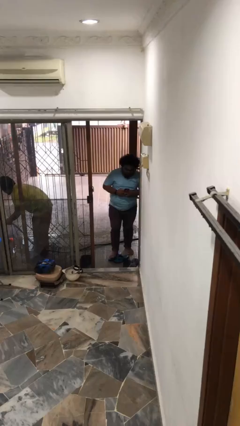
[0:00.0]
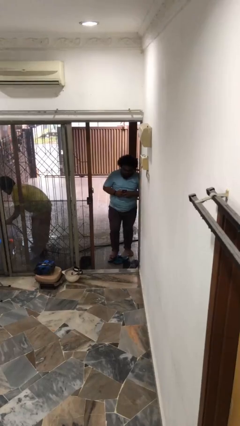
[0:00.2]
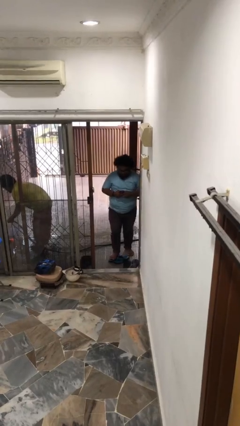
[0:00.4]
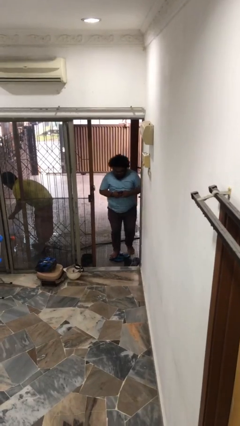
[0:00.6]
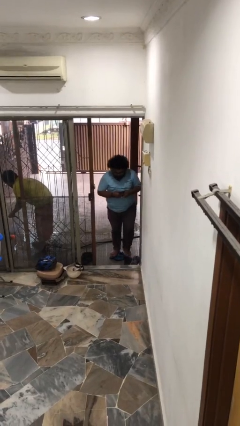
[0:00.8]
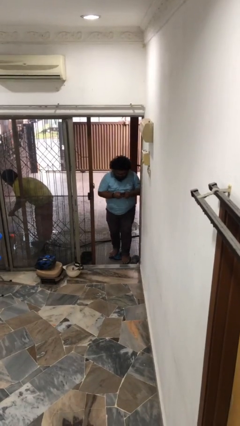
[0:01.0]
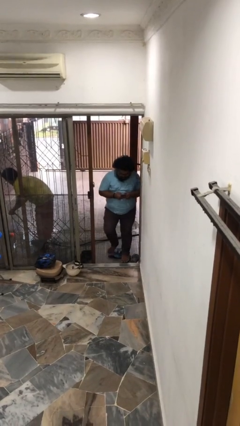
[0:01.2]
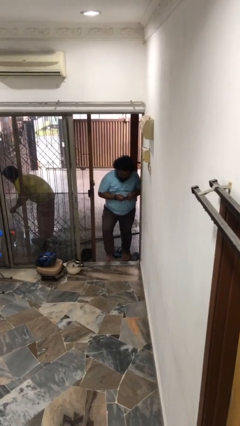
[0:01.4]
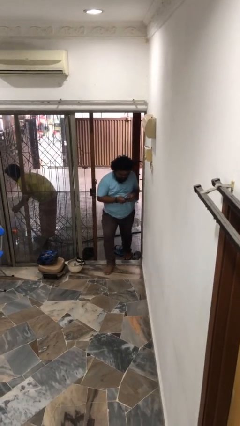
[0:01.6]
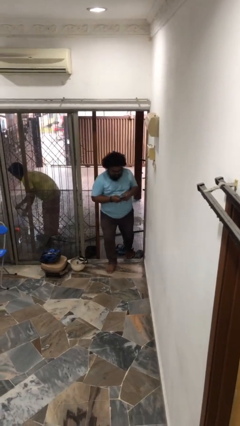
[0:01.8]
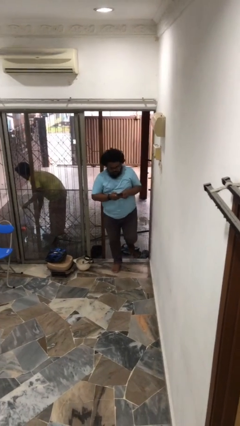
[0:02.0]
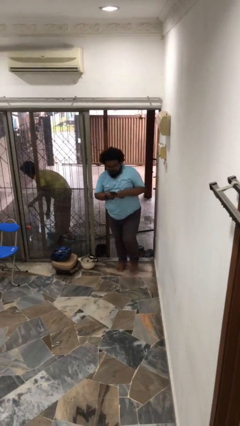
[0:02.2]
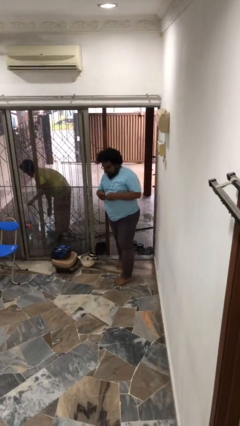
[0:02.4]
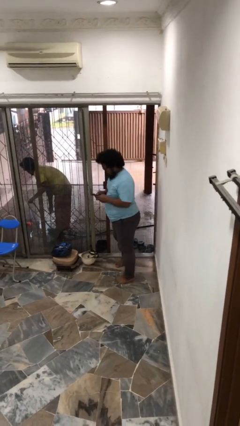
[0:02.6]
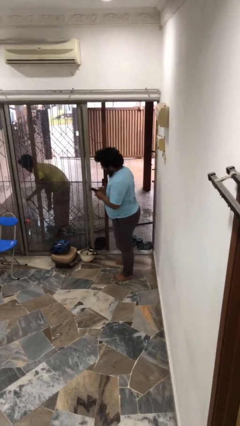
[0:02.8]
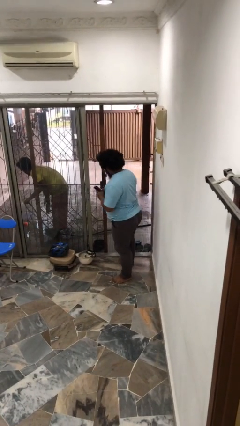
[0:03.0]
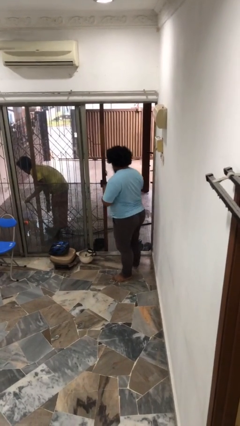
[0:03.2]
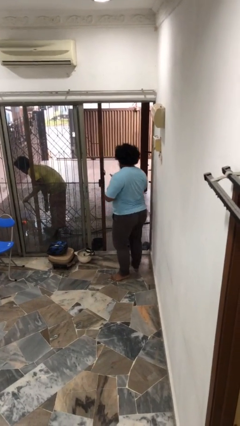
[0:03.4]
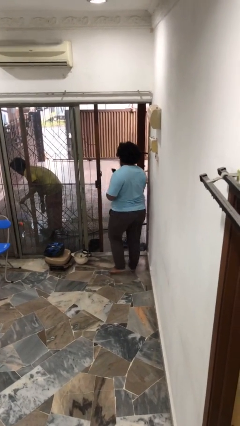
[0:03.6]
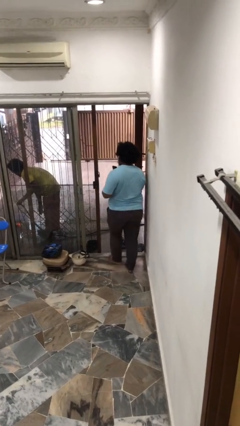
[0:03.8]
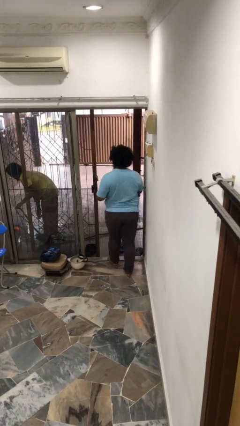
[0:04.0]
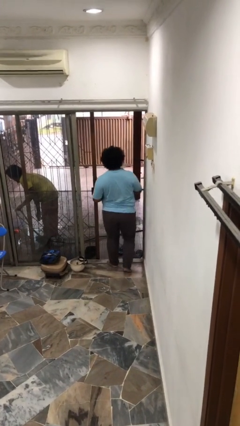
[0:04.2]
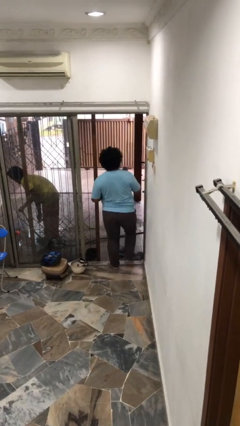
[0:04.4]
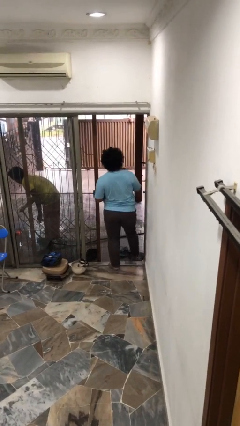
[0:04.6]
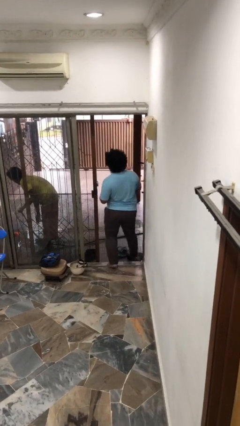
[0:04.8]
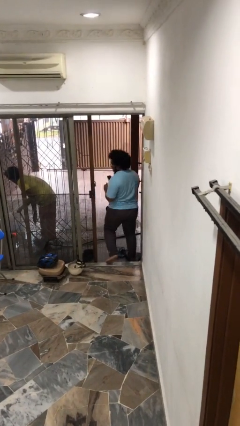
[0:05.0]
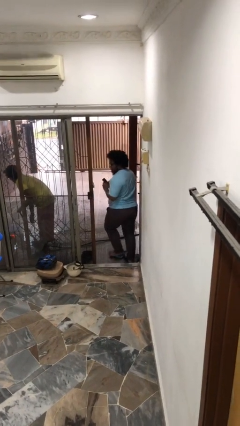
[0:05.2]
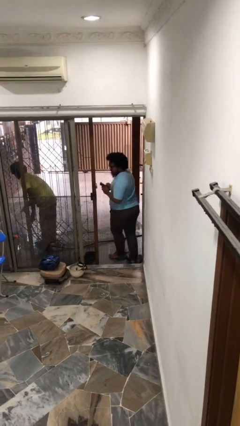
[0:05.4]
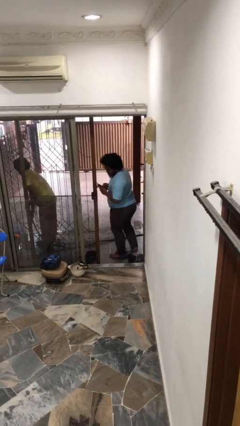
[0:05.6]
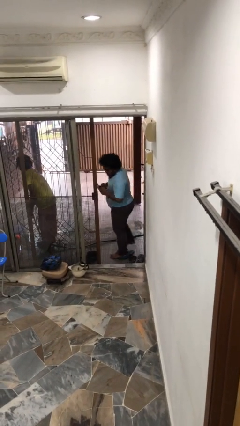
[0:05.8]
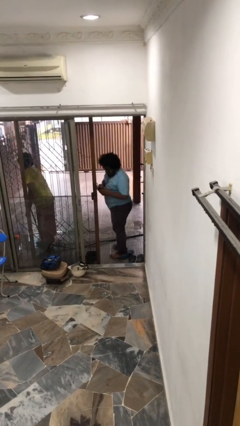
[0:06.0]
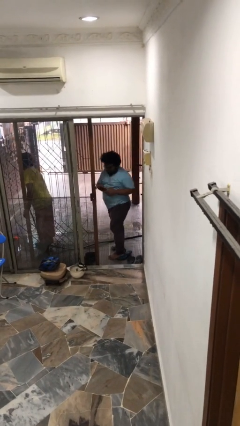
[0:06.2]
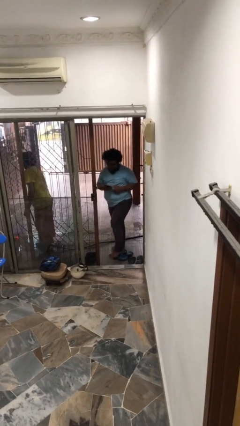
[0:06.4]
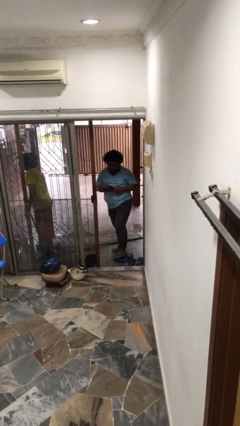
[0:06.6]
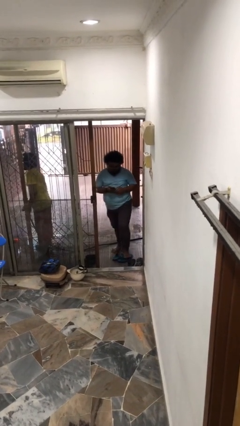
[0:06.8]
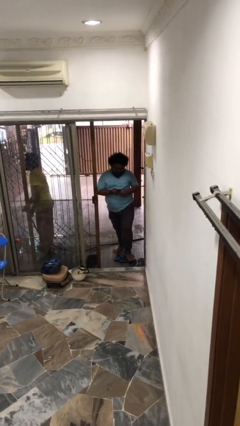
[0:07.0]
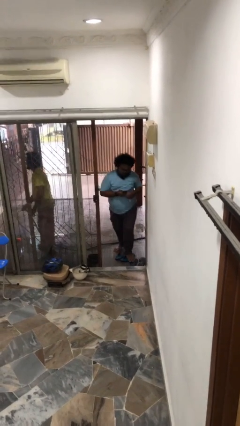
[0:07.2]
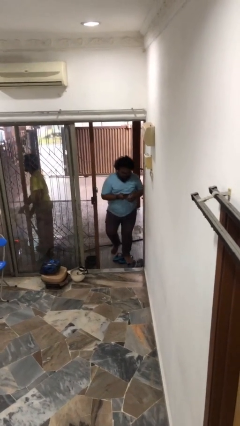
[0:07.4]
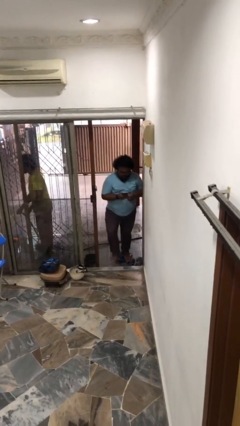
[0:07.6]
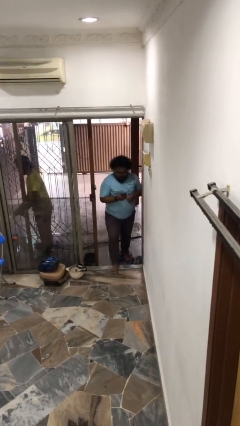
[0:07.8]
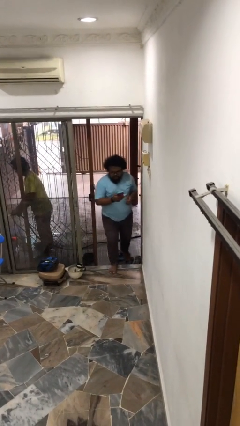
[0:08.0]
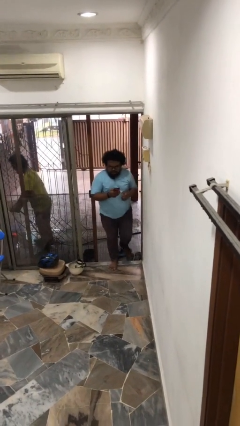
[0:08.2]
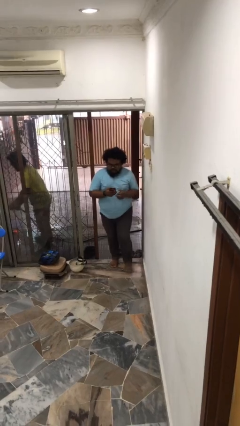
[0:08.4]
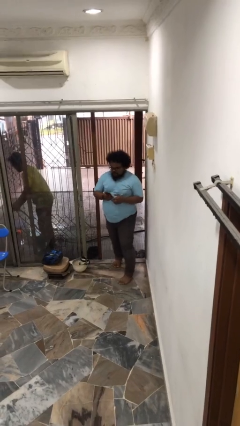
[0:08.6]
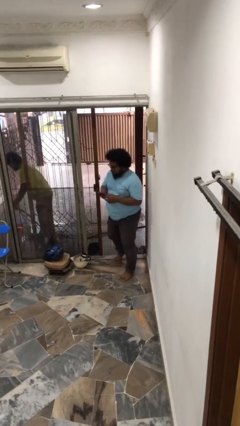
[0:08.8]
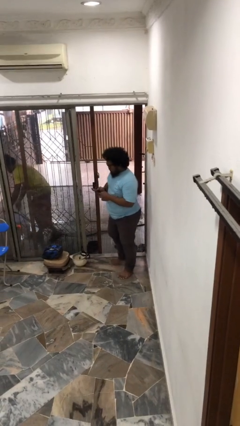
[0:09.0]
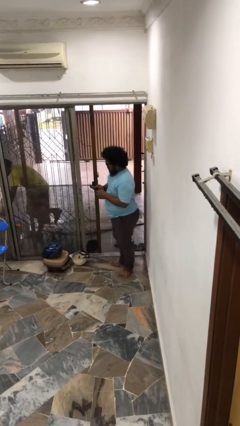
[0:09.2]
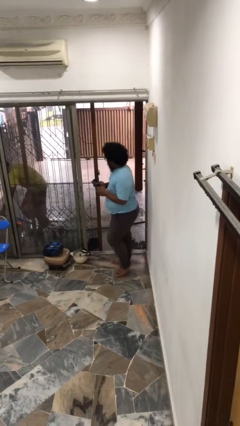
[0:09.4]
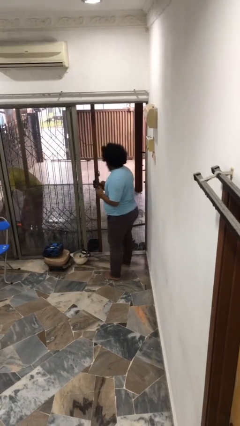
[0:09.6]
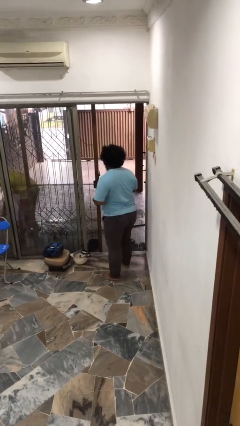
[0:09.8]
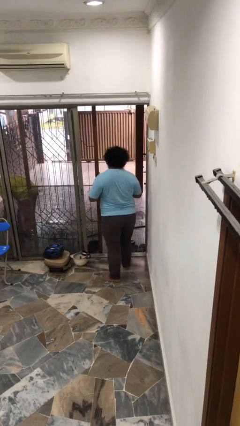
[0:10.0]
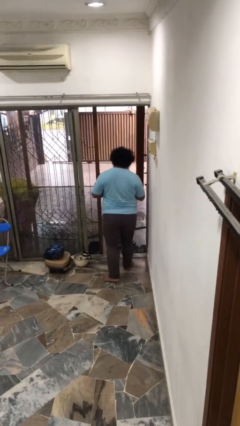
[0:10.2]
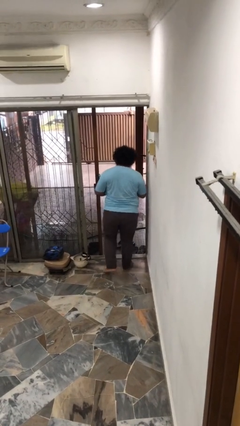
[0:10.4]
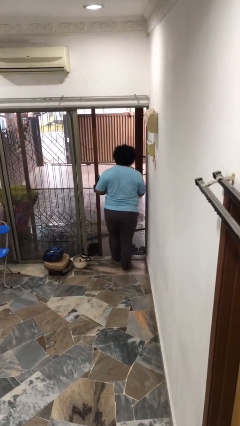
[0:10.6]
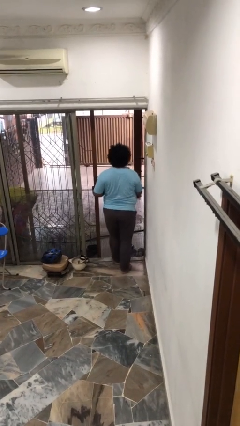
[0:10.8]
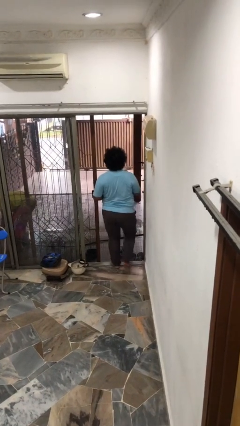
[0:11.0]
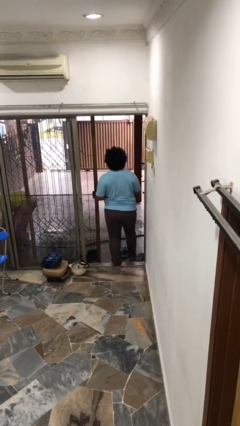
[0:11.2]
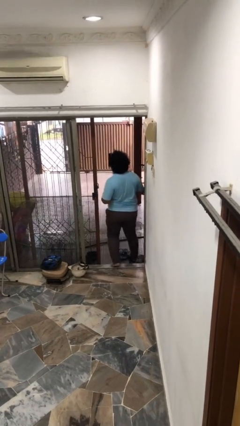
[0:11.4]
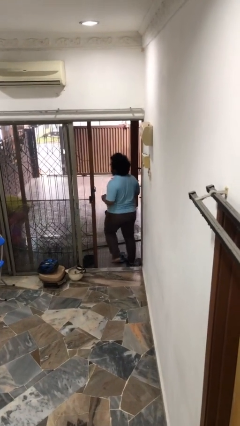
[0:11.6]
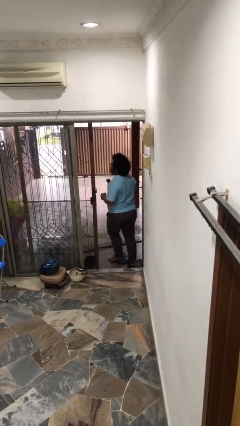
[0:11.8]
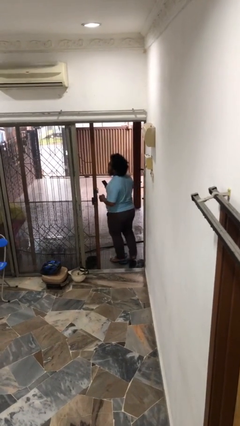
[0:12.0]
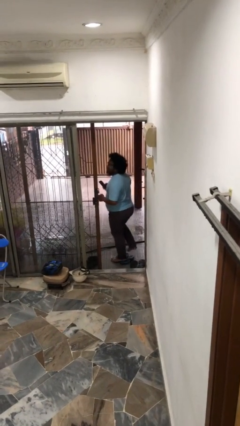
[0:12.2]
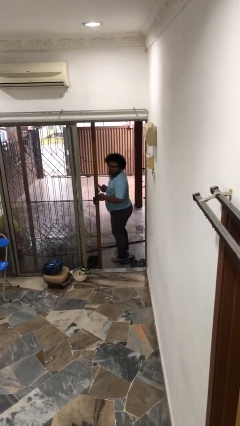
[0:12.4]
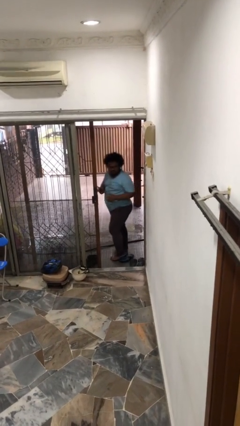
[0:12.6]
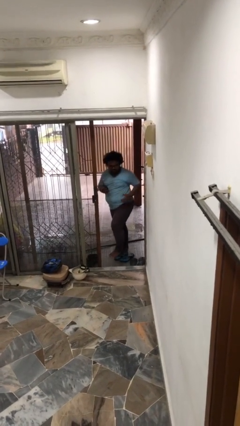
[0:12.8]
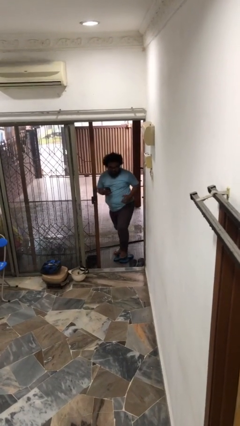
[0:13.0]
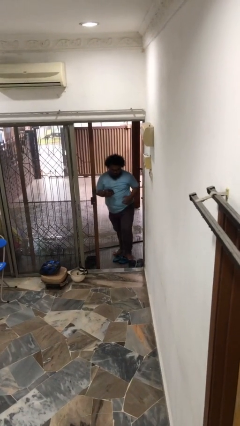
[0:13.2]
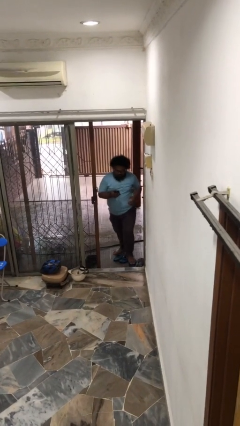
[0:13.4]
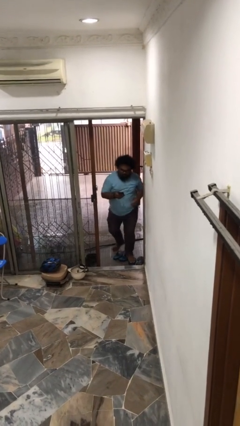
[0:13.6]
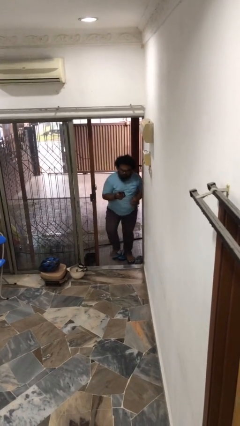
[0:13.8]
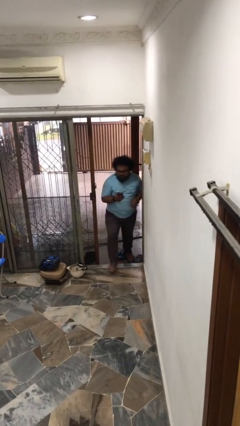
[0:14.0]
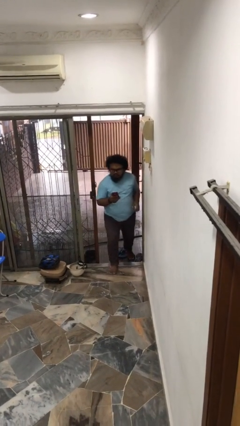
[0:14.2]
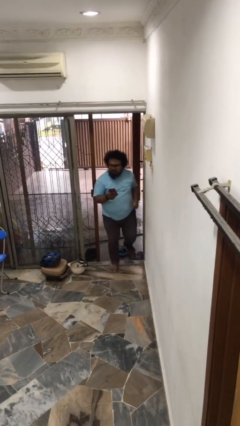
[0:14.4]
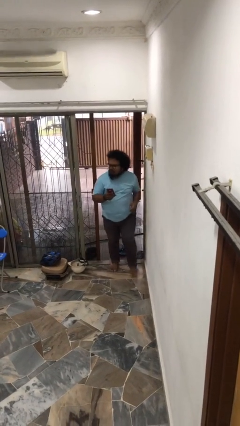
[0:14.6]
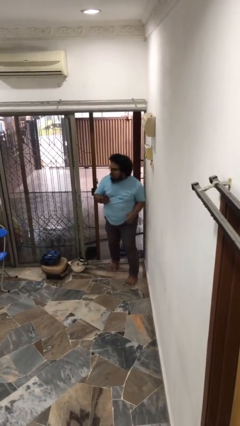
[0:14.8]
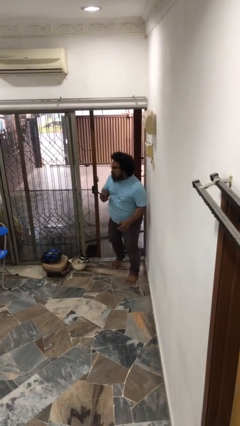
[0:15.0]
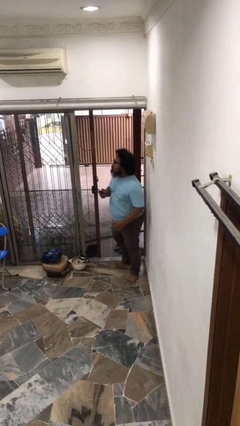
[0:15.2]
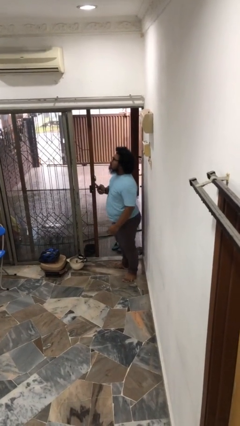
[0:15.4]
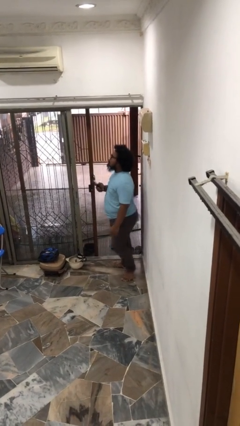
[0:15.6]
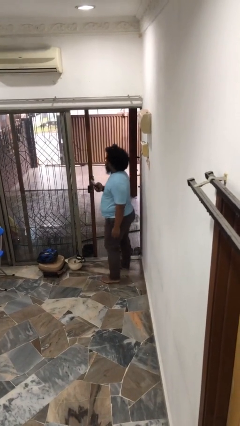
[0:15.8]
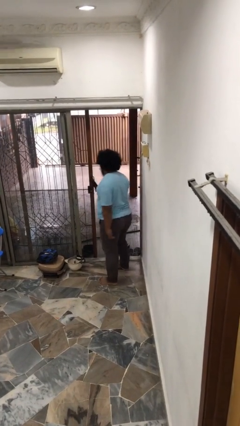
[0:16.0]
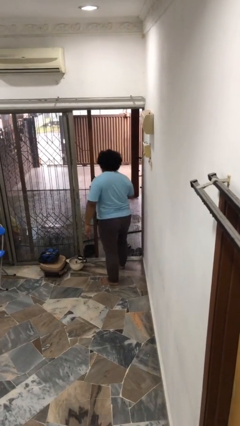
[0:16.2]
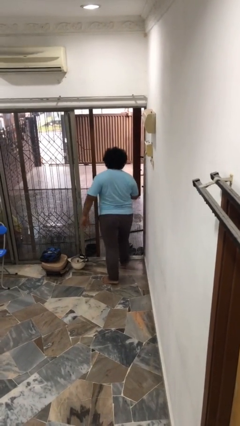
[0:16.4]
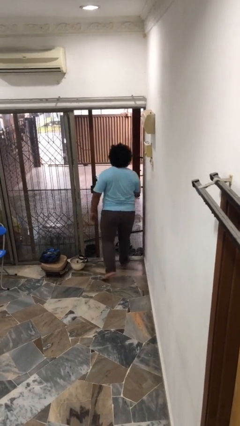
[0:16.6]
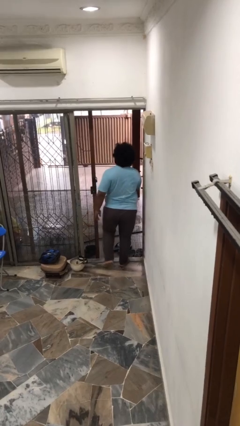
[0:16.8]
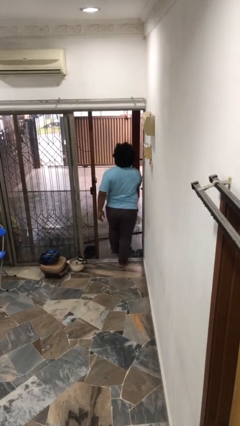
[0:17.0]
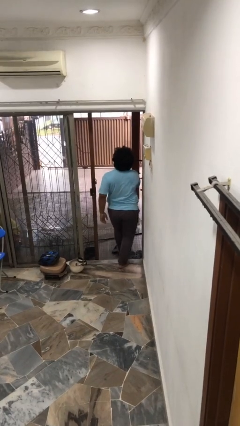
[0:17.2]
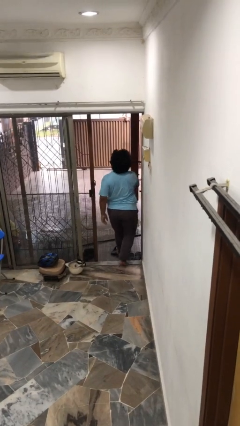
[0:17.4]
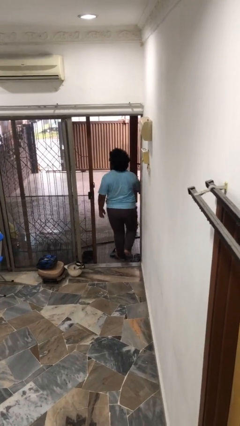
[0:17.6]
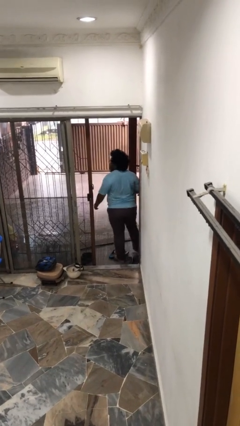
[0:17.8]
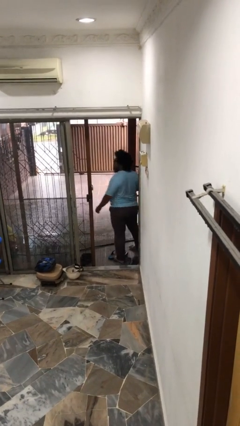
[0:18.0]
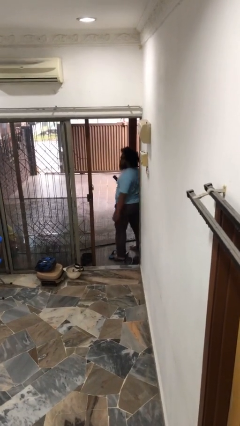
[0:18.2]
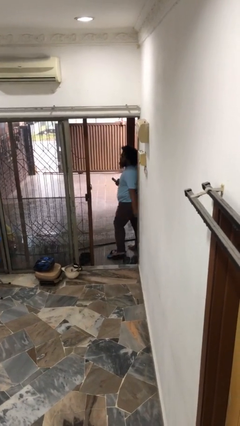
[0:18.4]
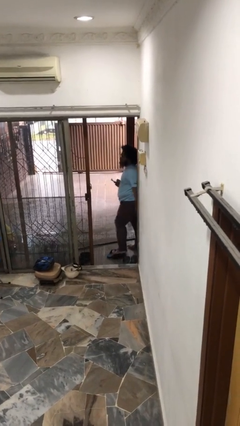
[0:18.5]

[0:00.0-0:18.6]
person texts on phone
